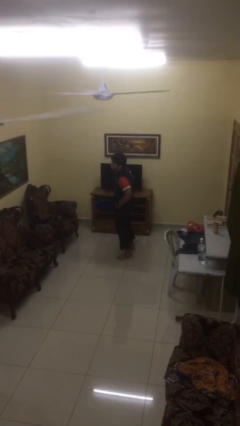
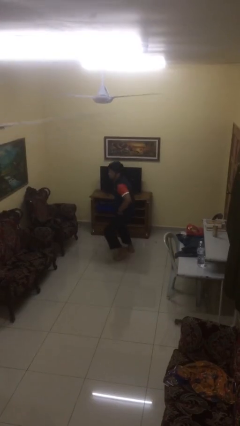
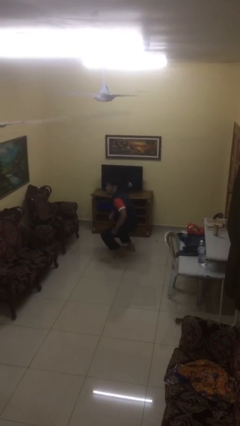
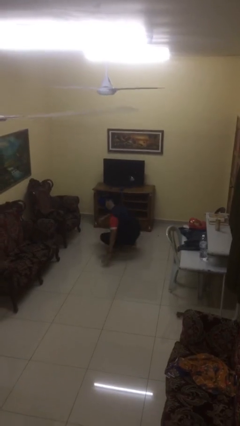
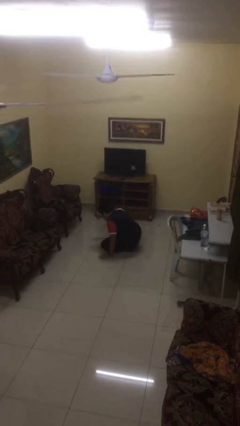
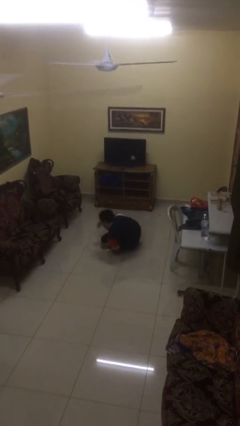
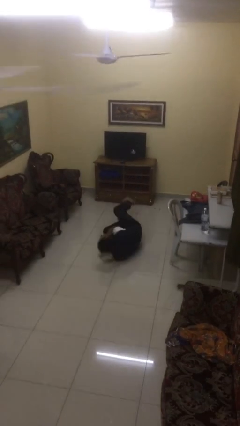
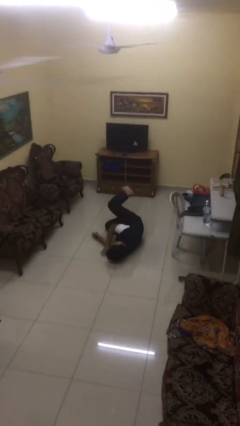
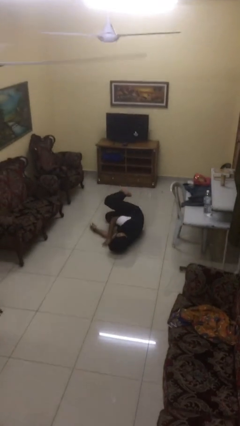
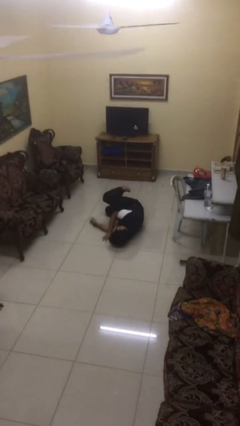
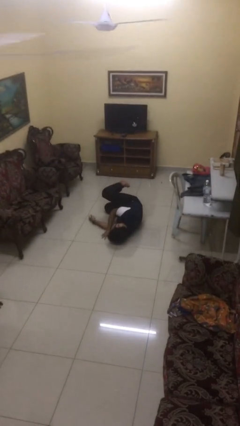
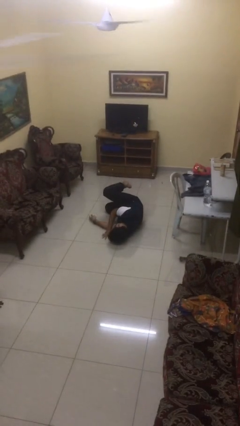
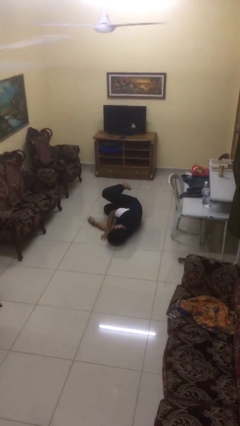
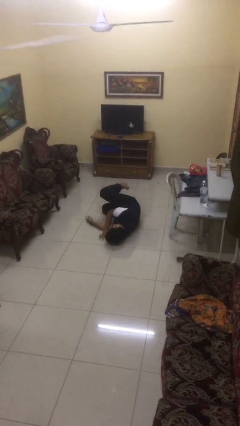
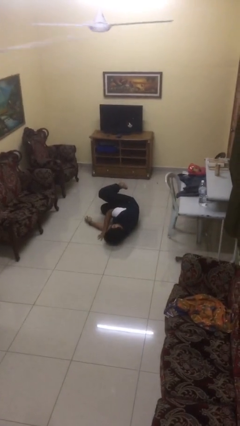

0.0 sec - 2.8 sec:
person falls while standing

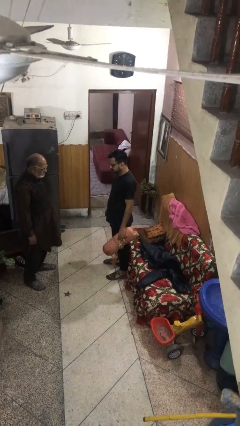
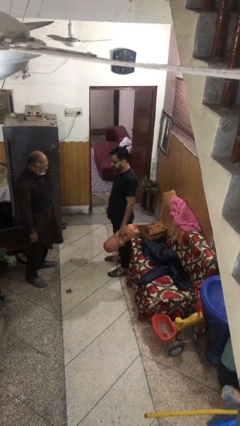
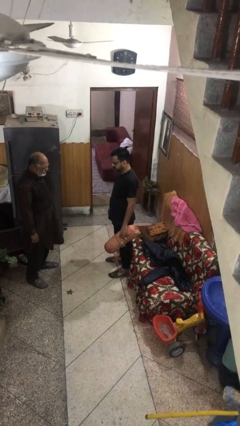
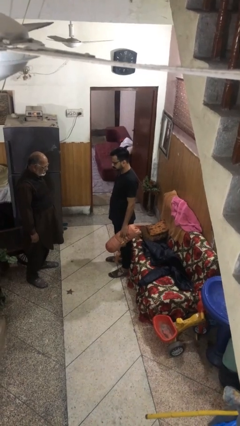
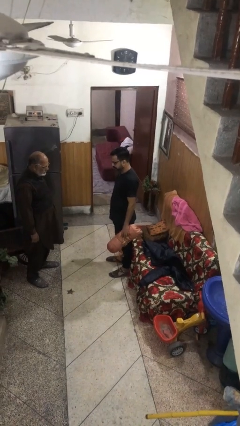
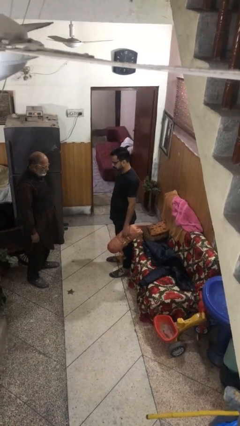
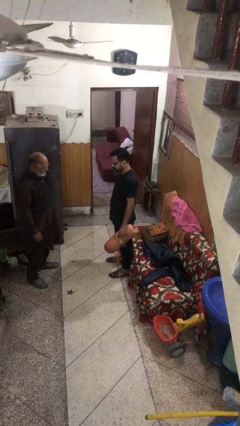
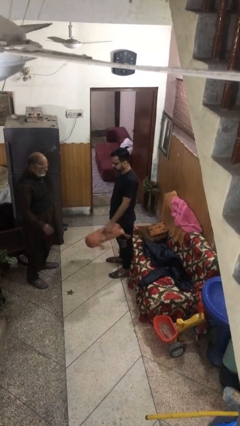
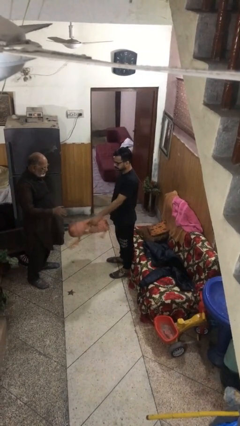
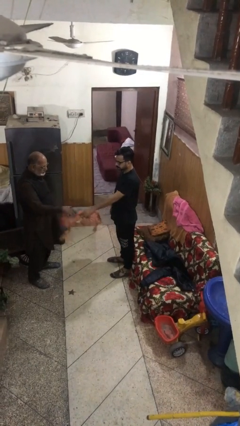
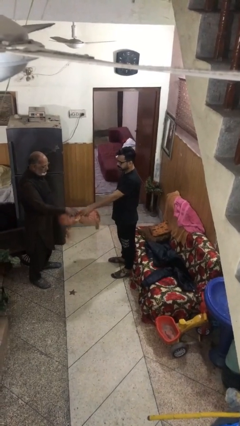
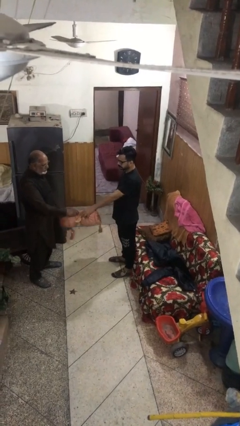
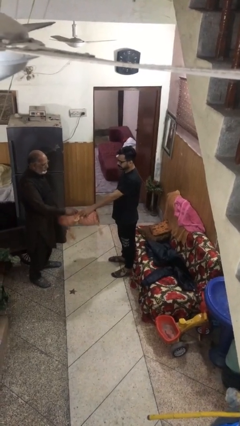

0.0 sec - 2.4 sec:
person transfers object to person

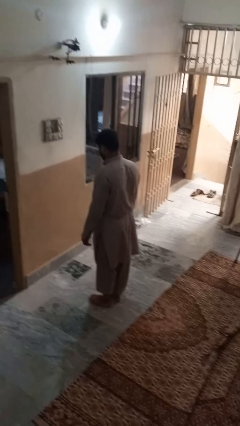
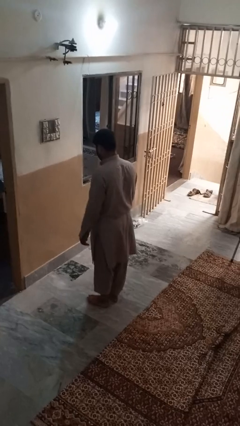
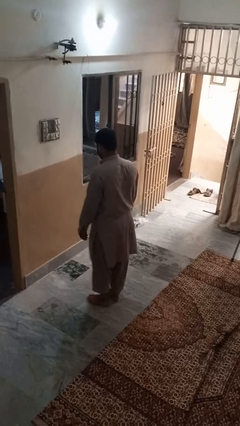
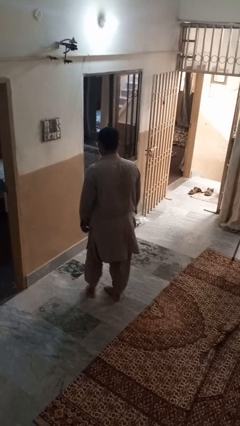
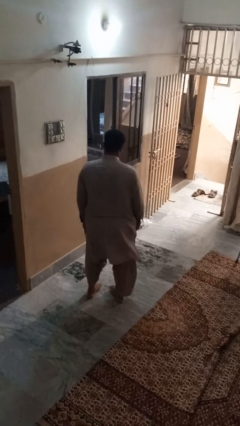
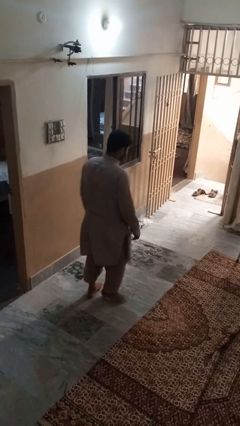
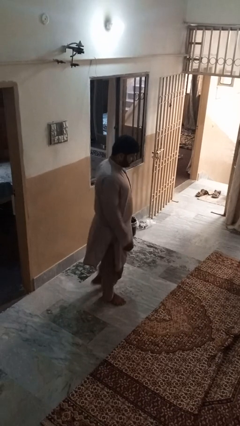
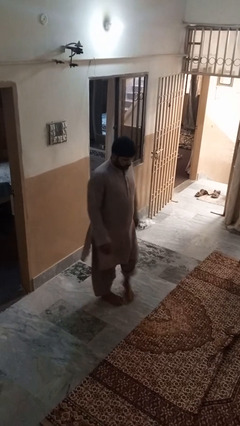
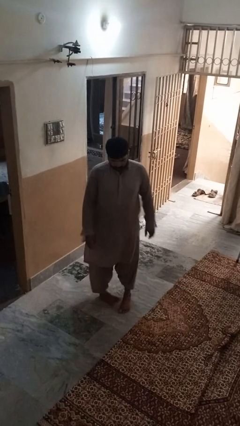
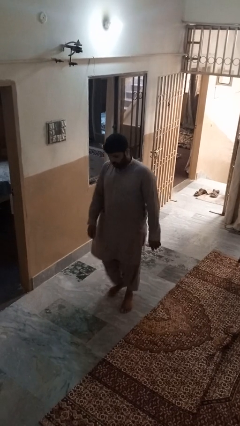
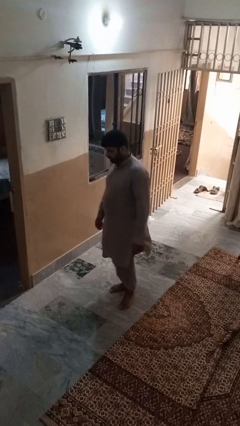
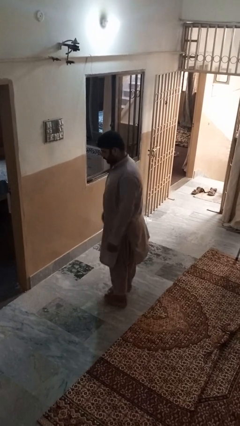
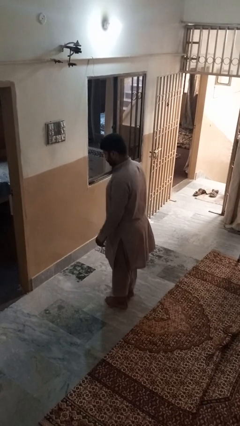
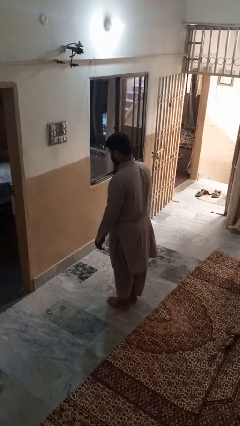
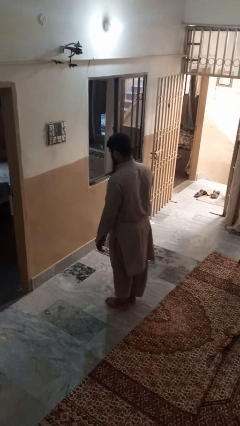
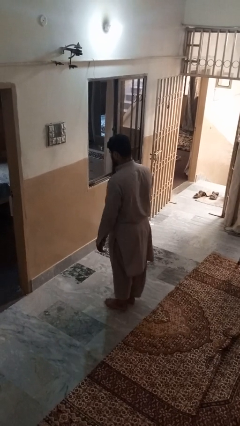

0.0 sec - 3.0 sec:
person twirls

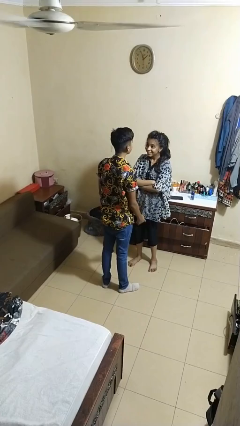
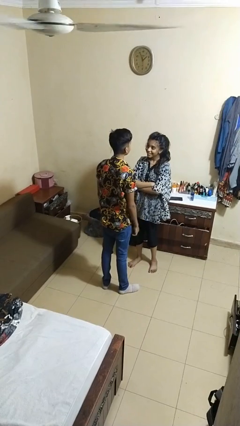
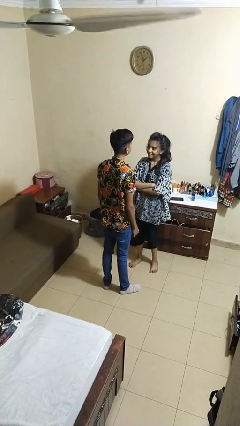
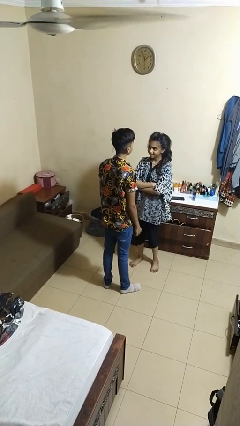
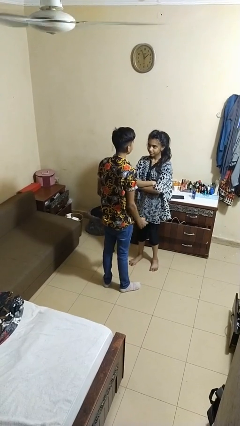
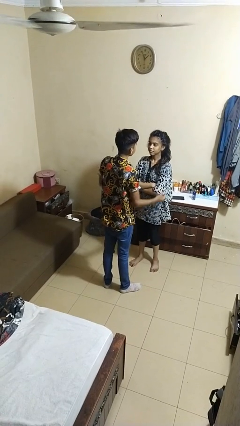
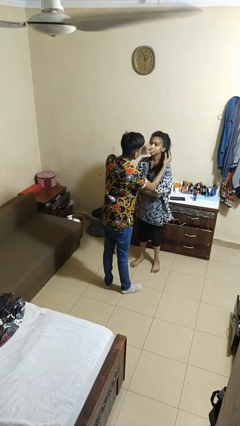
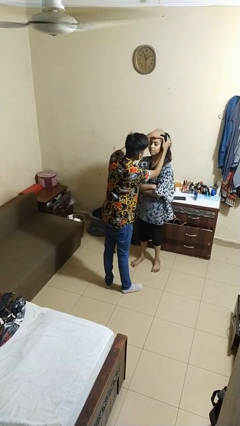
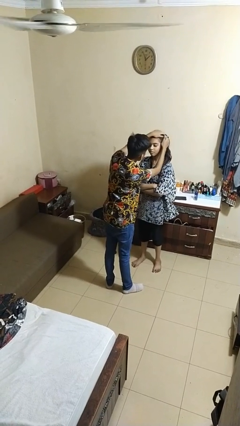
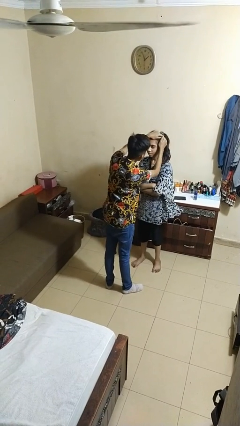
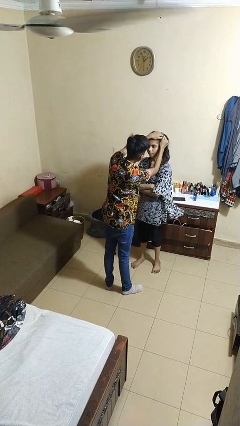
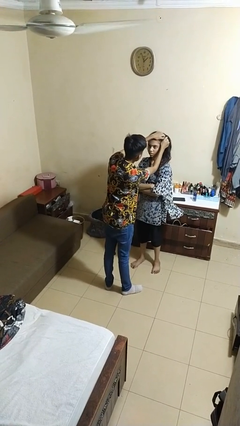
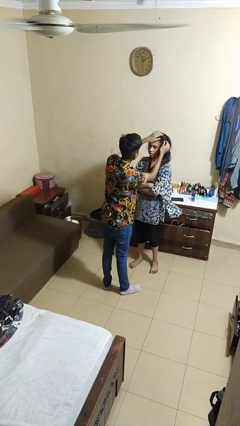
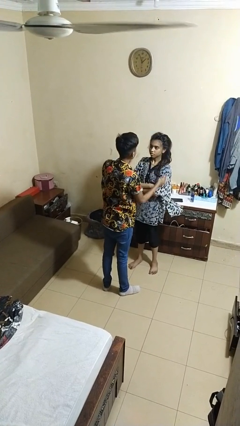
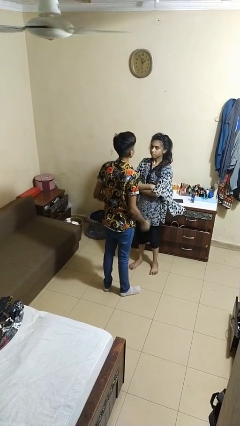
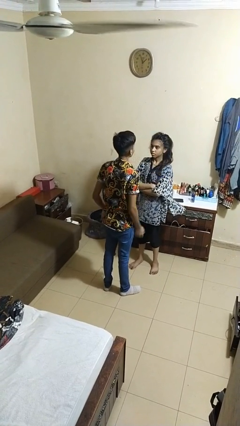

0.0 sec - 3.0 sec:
person grabs person by hair

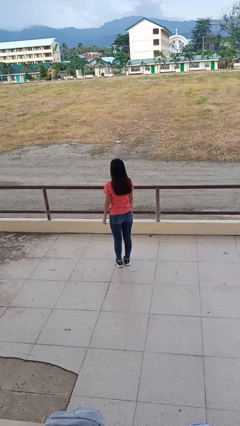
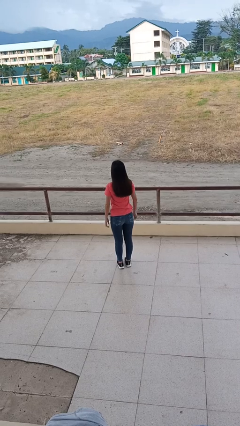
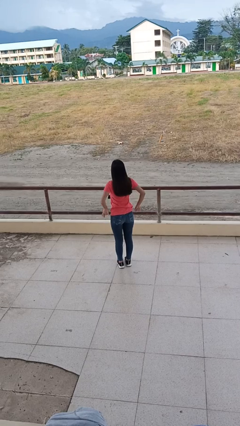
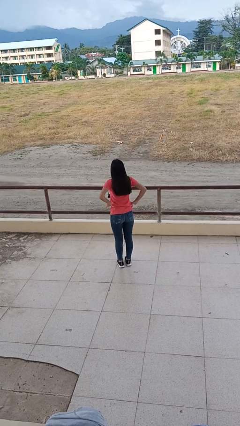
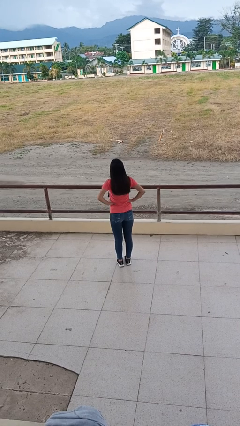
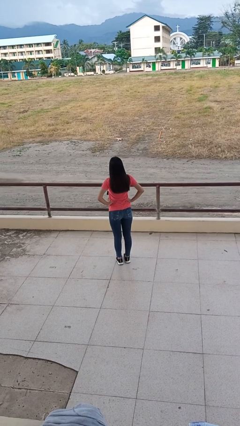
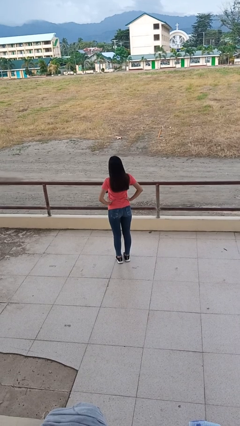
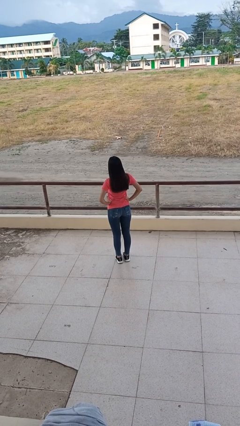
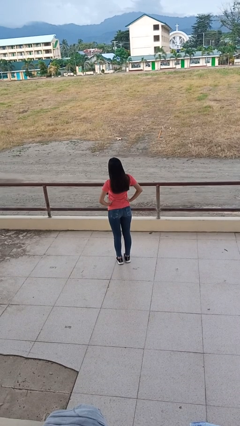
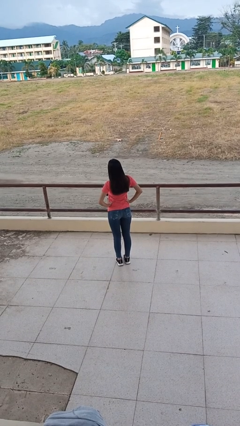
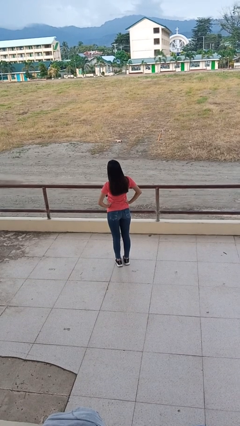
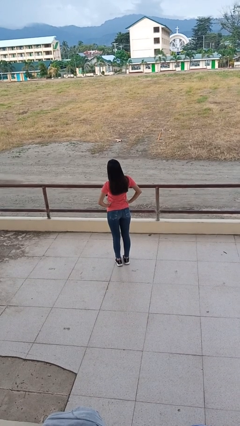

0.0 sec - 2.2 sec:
person stretches back

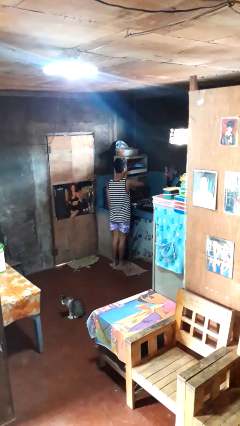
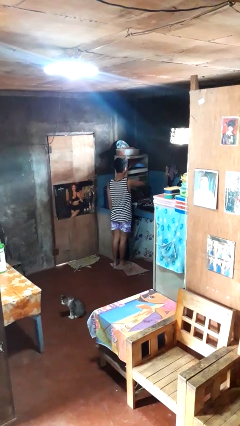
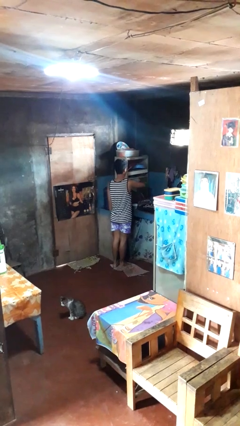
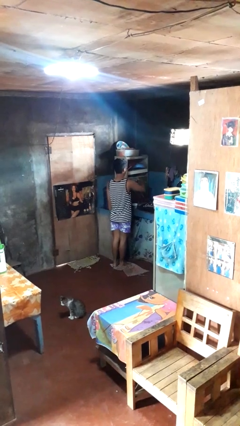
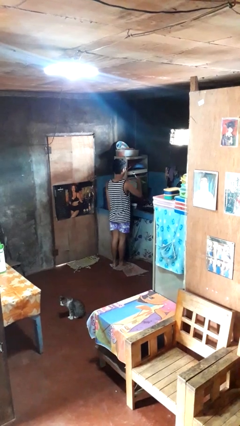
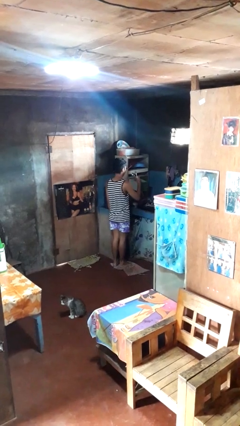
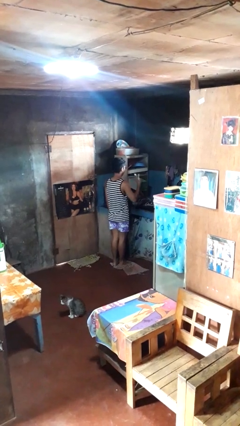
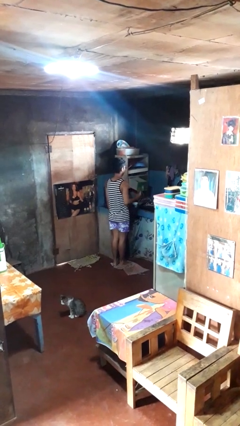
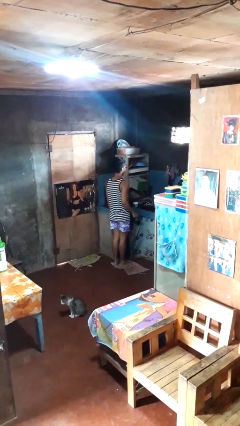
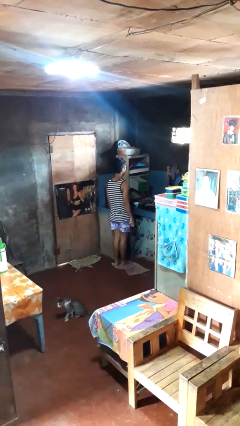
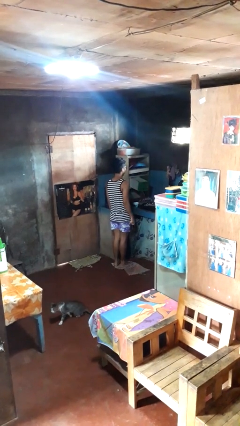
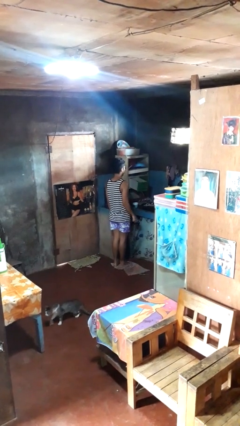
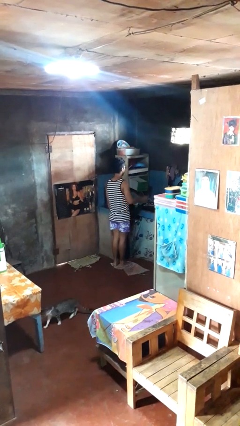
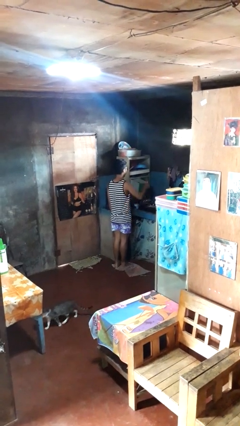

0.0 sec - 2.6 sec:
person takes object from kitchen drawer

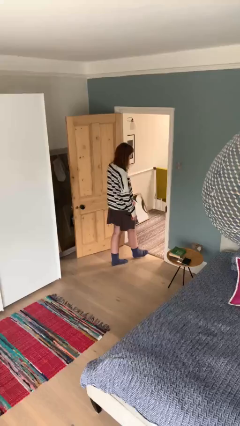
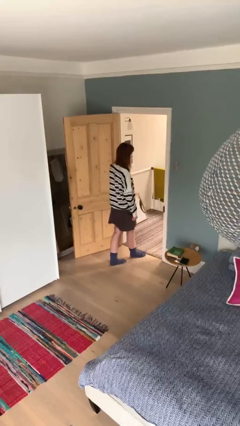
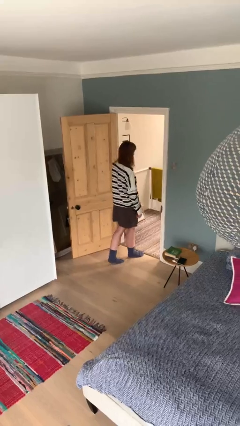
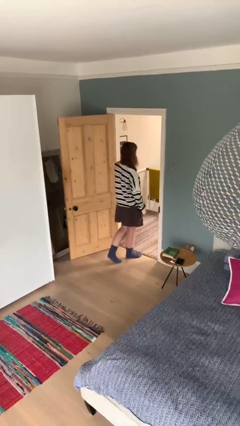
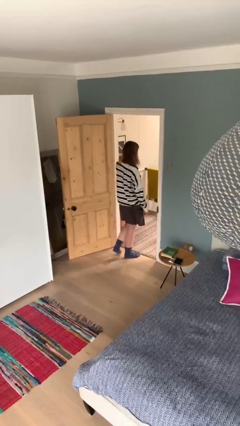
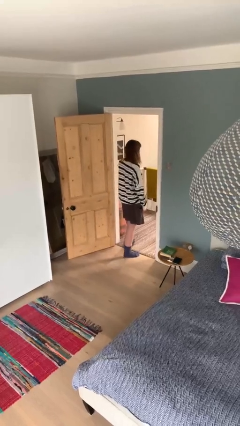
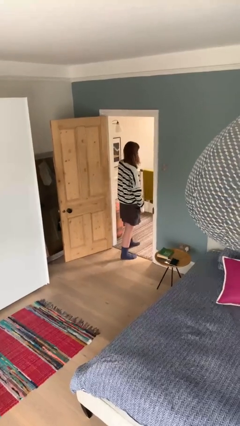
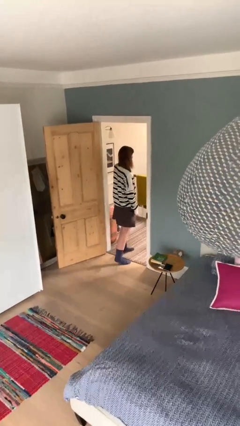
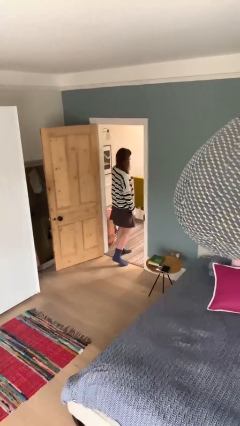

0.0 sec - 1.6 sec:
person exits scene through structure
